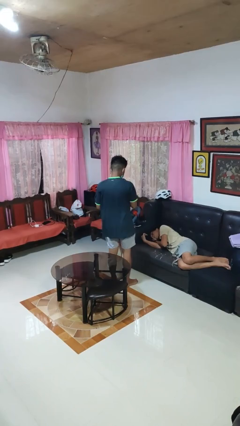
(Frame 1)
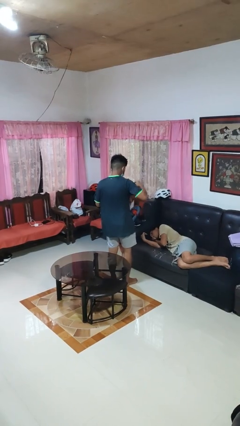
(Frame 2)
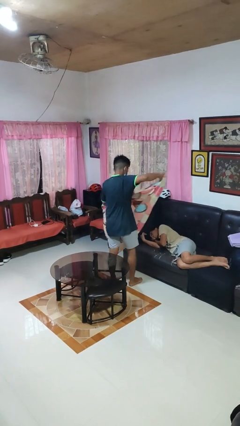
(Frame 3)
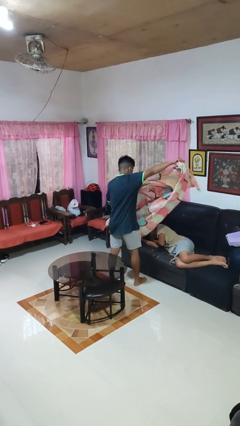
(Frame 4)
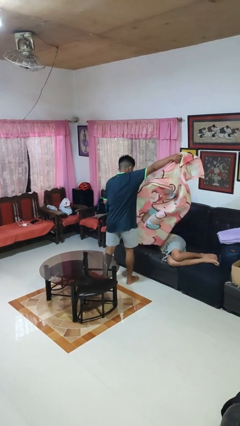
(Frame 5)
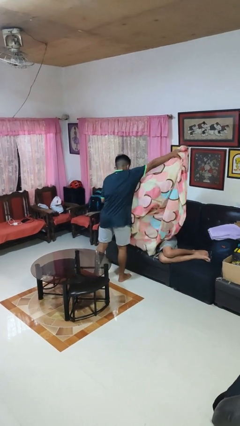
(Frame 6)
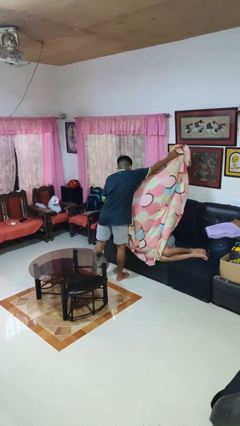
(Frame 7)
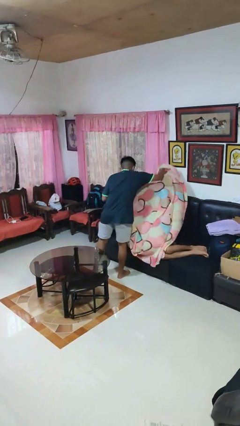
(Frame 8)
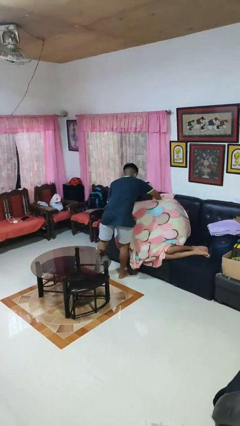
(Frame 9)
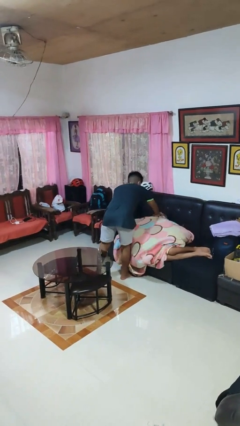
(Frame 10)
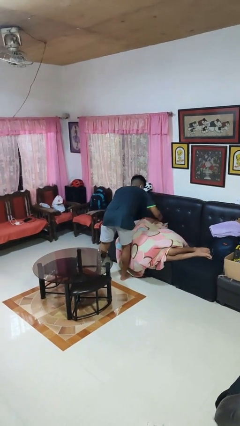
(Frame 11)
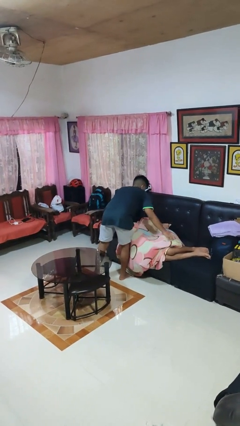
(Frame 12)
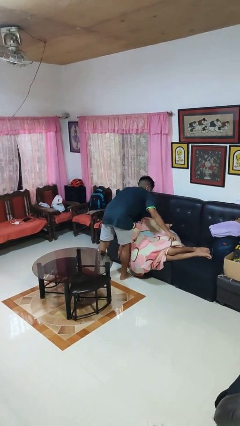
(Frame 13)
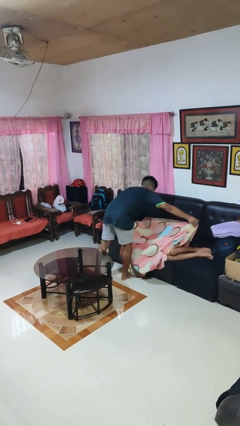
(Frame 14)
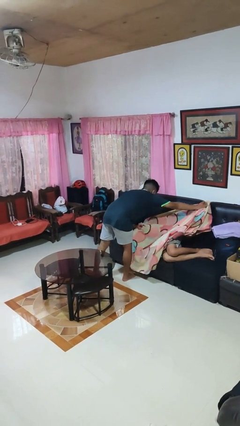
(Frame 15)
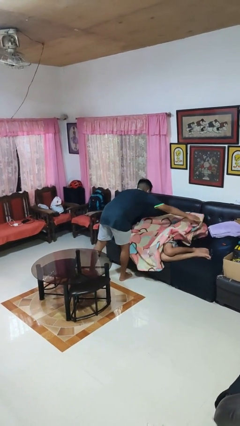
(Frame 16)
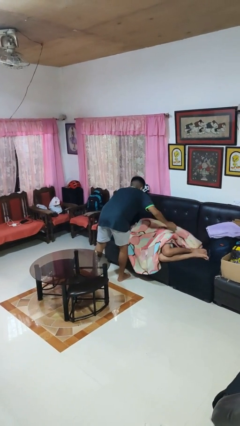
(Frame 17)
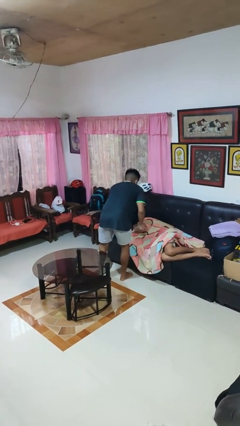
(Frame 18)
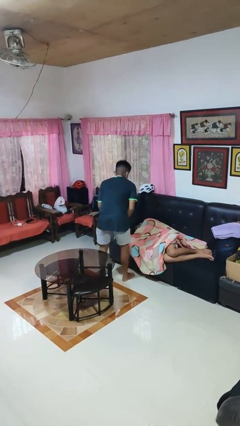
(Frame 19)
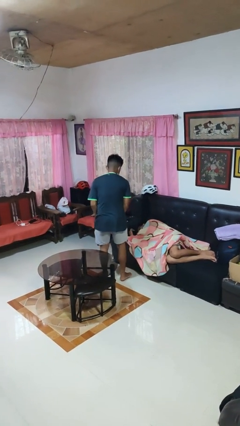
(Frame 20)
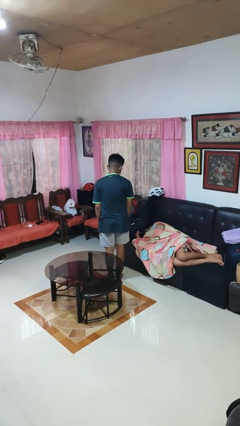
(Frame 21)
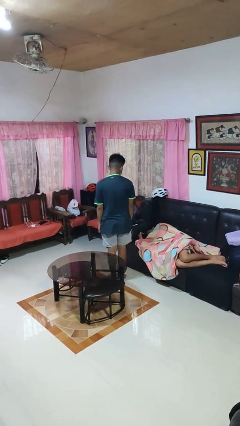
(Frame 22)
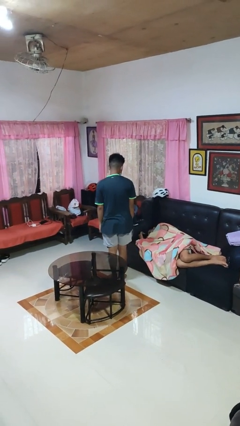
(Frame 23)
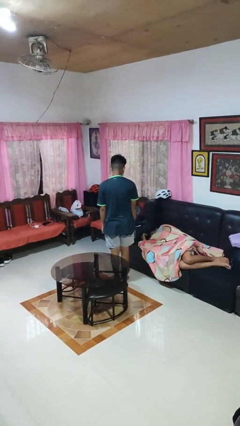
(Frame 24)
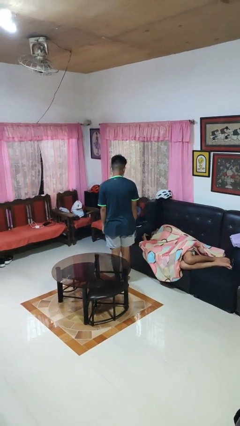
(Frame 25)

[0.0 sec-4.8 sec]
person covers friend with blanket

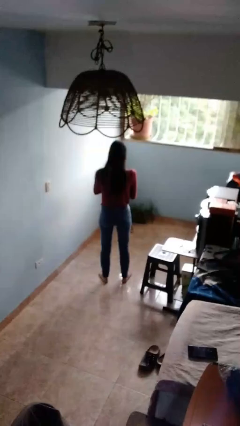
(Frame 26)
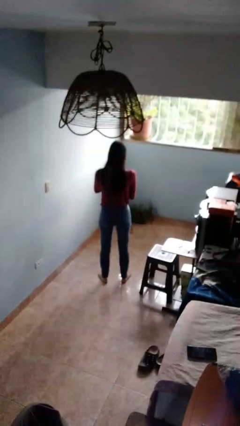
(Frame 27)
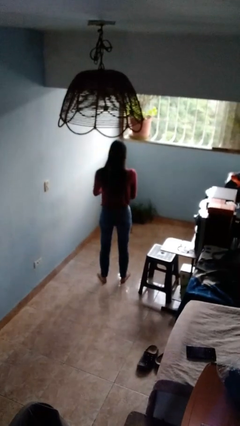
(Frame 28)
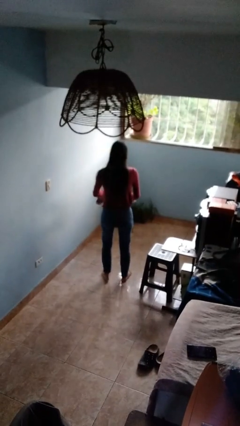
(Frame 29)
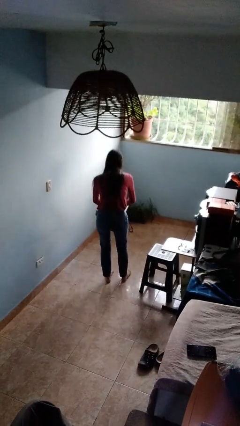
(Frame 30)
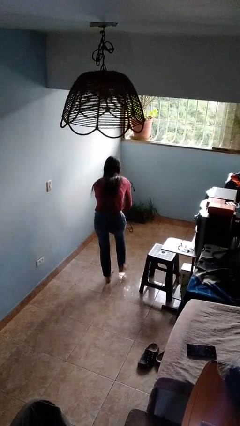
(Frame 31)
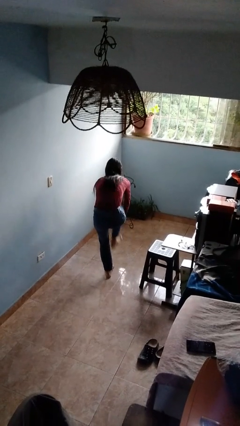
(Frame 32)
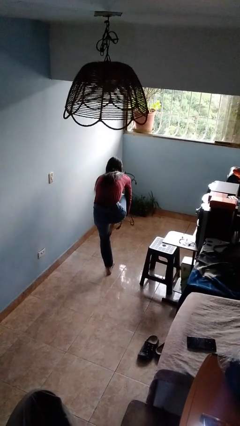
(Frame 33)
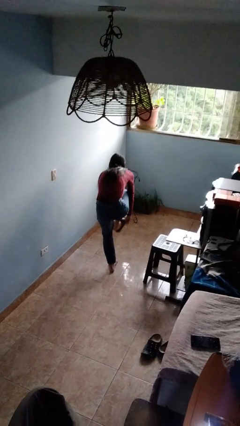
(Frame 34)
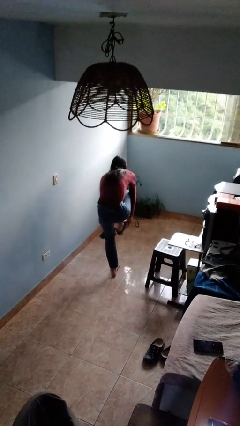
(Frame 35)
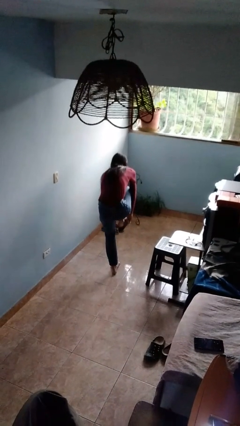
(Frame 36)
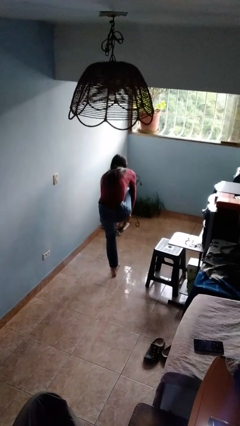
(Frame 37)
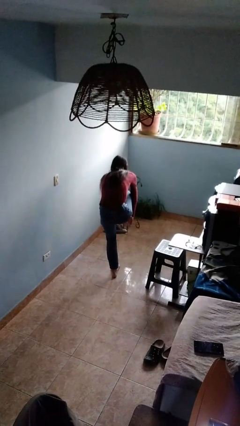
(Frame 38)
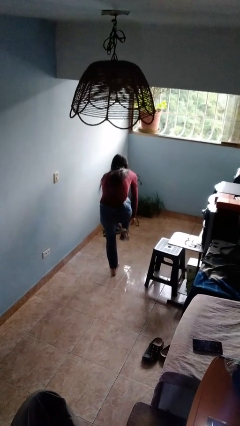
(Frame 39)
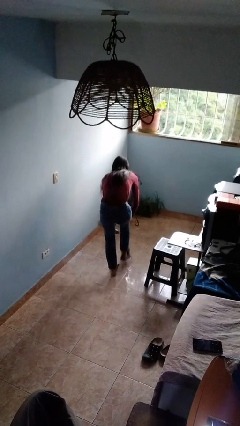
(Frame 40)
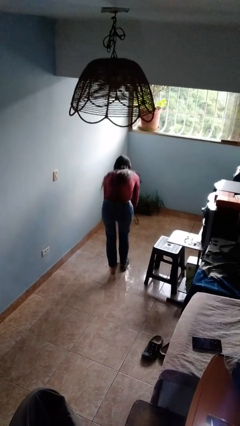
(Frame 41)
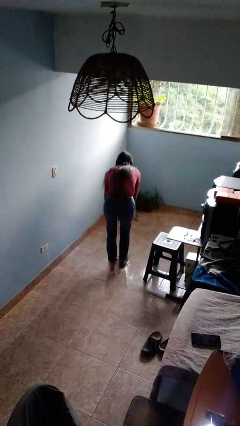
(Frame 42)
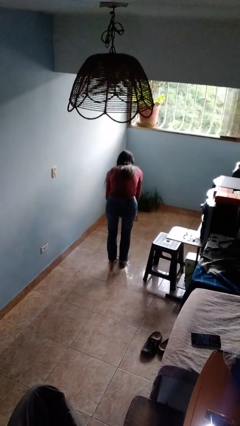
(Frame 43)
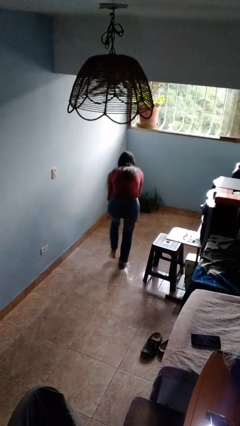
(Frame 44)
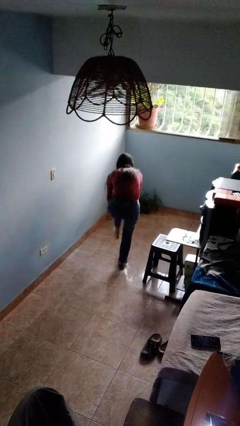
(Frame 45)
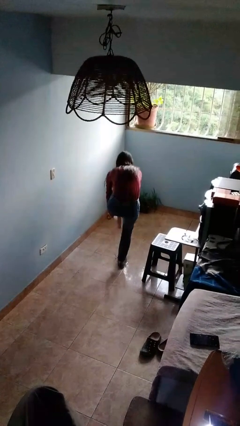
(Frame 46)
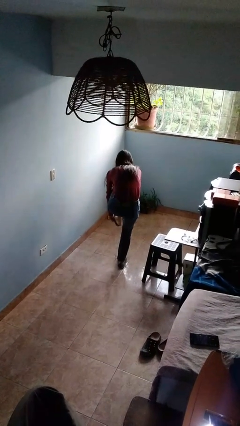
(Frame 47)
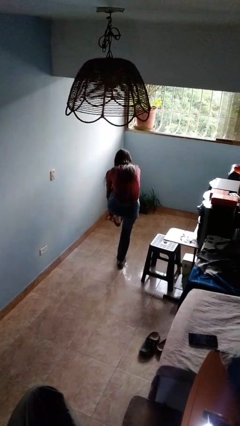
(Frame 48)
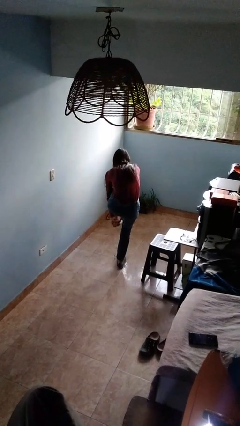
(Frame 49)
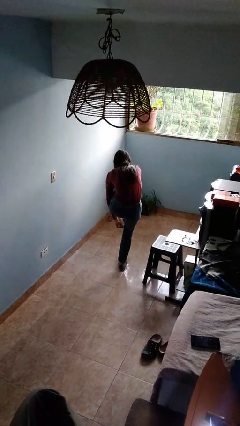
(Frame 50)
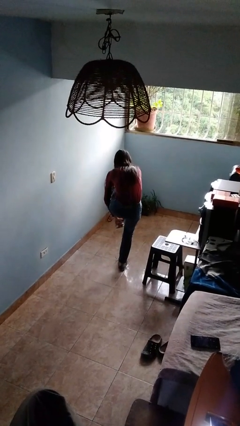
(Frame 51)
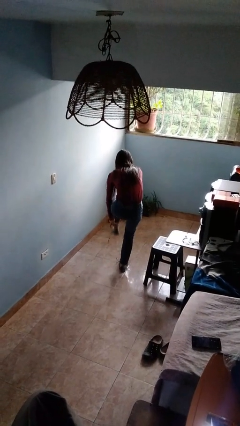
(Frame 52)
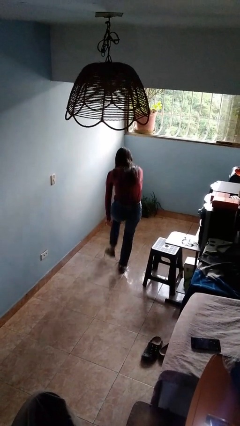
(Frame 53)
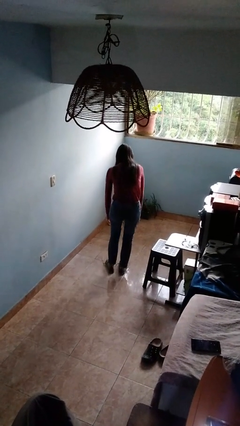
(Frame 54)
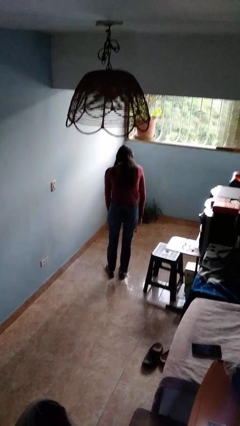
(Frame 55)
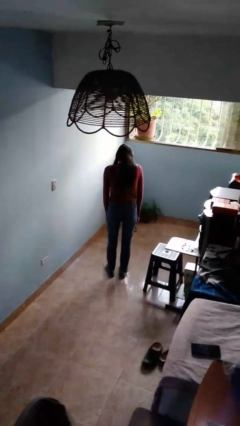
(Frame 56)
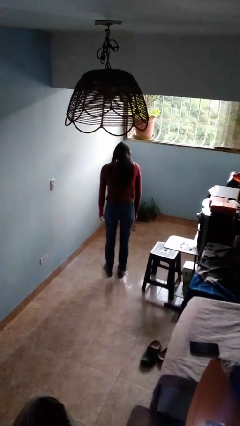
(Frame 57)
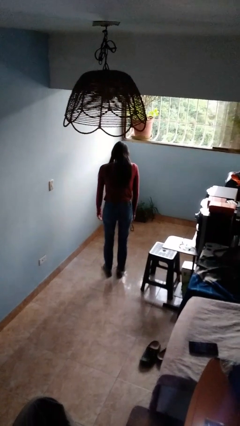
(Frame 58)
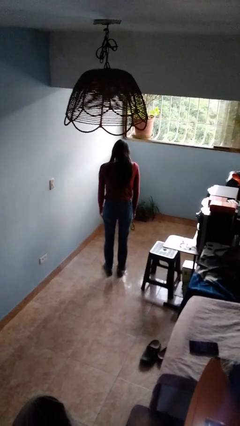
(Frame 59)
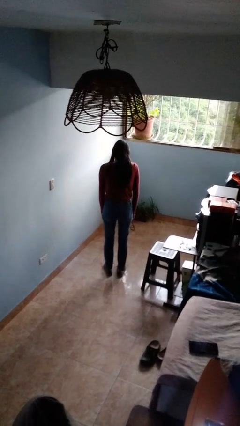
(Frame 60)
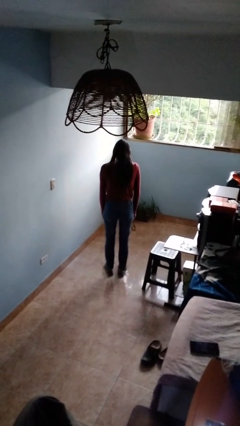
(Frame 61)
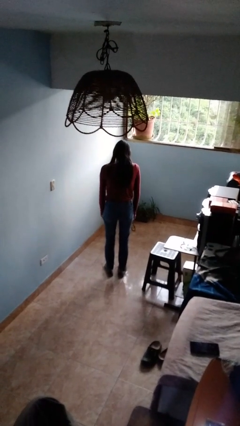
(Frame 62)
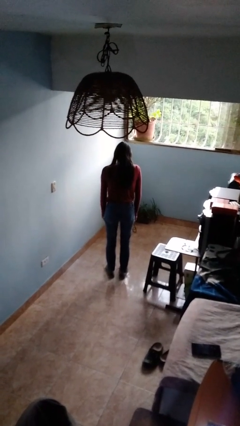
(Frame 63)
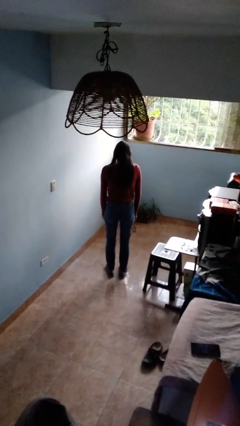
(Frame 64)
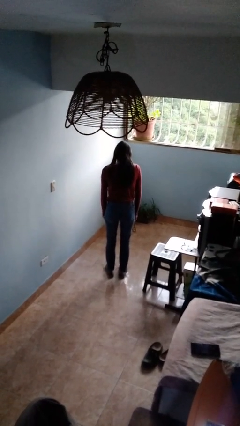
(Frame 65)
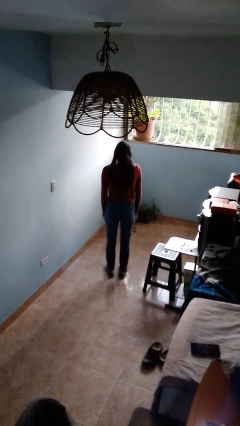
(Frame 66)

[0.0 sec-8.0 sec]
person puts on shoes

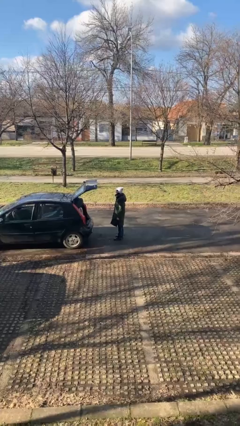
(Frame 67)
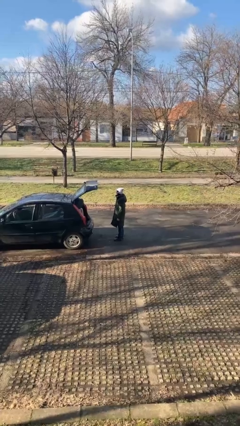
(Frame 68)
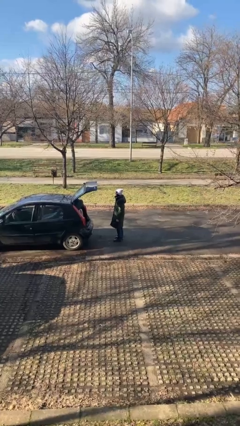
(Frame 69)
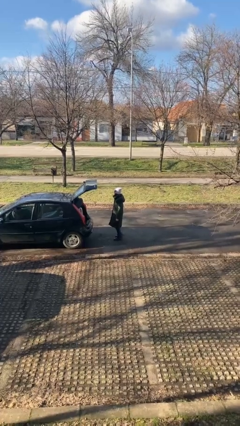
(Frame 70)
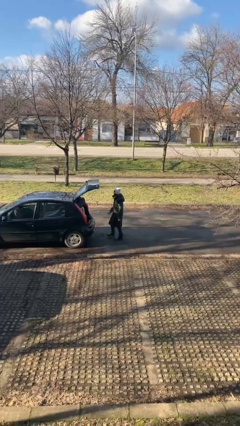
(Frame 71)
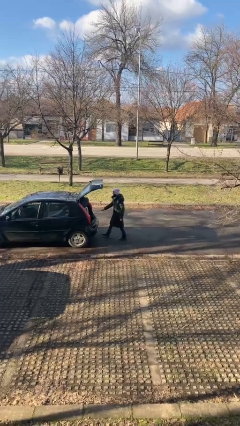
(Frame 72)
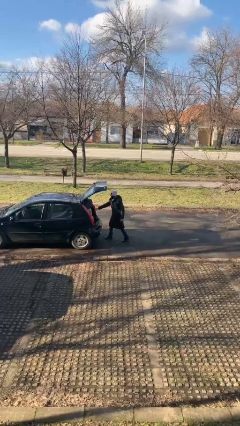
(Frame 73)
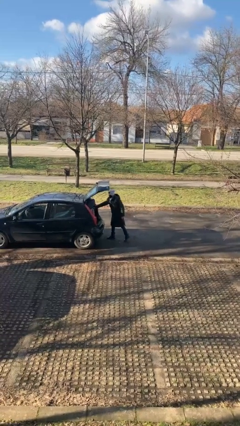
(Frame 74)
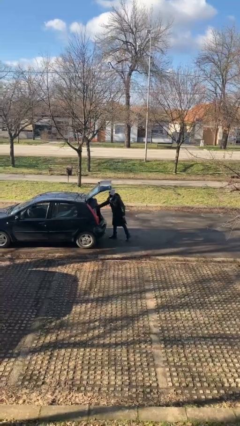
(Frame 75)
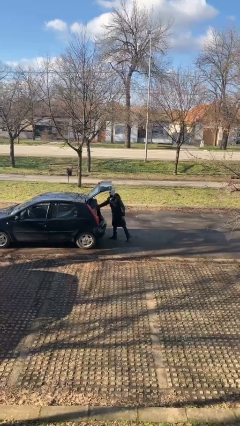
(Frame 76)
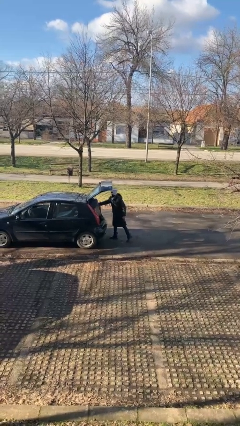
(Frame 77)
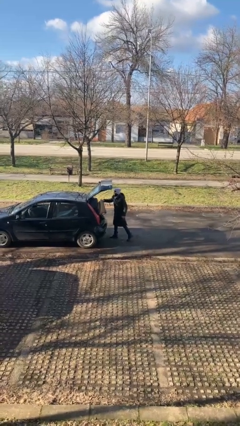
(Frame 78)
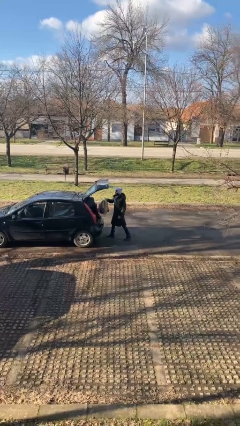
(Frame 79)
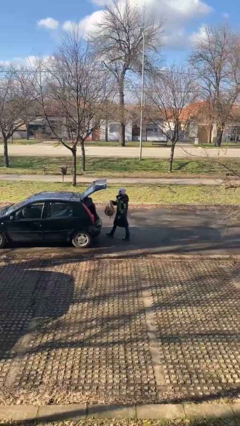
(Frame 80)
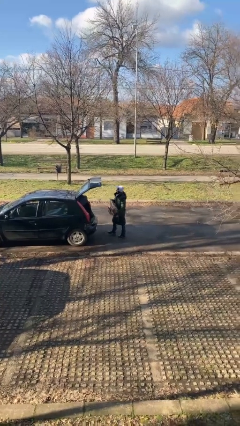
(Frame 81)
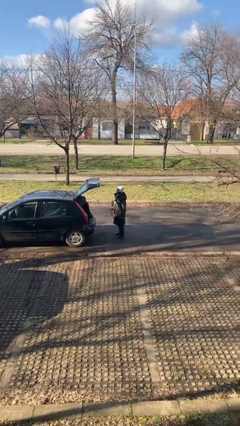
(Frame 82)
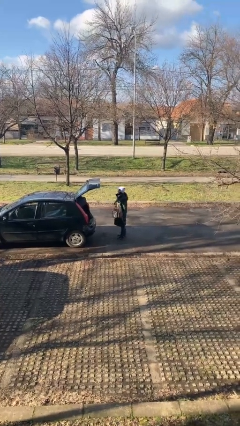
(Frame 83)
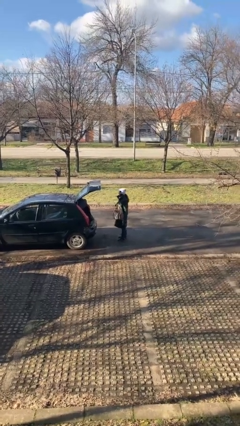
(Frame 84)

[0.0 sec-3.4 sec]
person unloads car

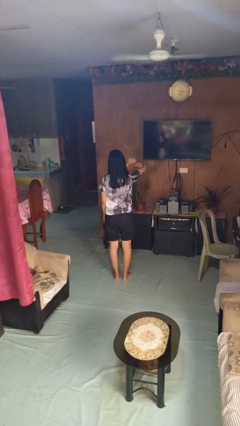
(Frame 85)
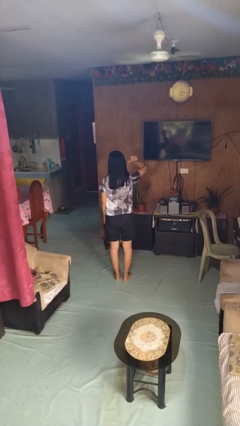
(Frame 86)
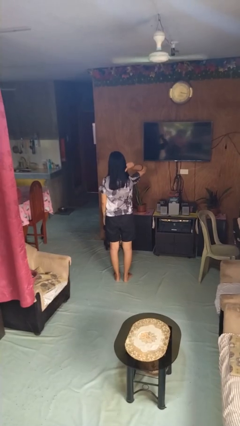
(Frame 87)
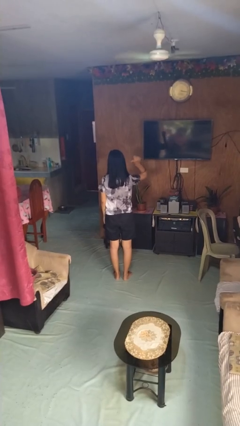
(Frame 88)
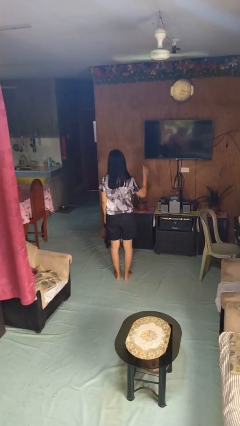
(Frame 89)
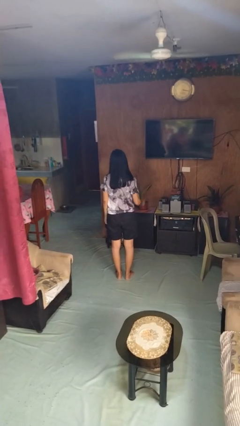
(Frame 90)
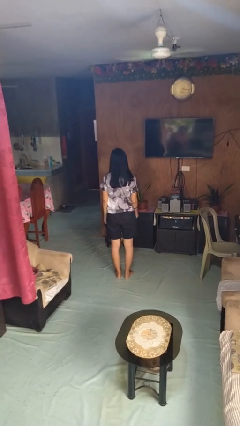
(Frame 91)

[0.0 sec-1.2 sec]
person gestures behind me

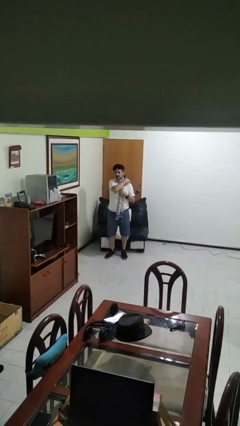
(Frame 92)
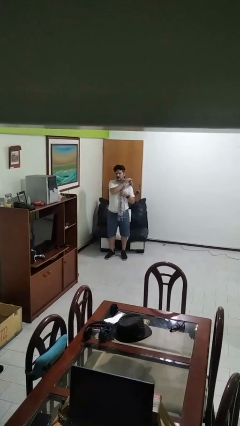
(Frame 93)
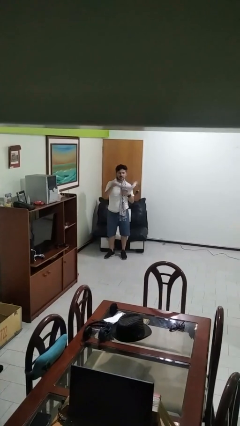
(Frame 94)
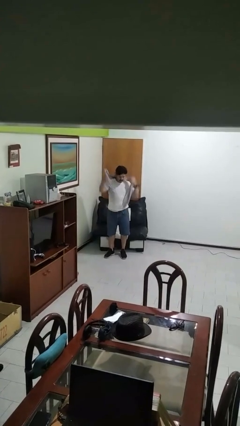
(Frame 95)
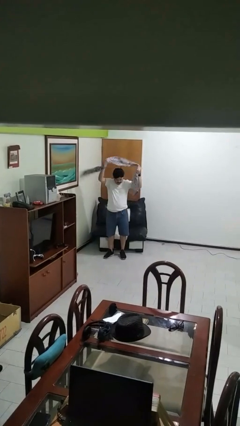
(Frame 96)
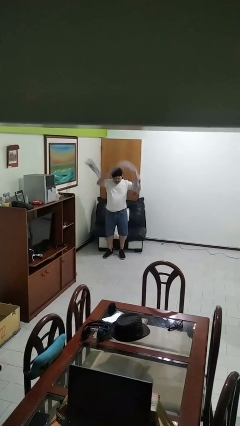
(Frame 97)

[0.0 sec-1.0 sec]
person takes off scarf
